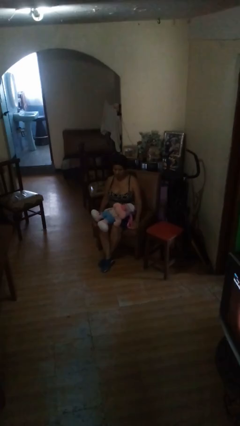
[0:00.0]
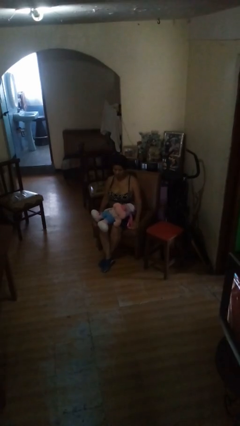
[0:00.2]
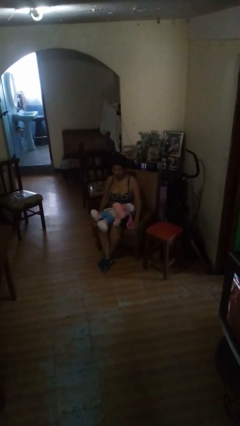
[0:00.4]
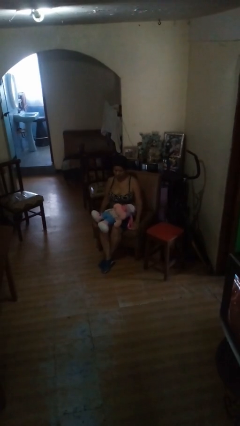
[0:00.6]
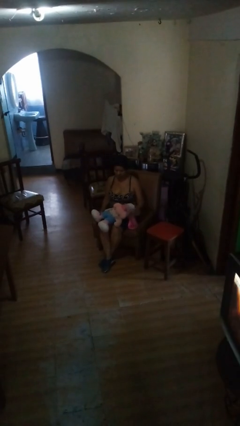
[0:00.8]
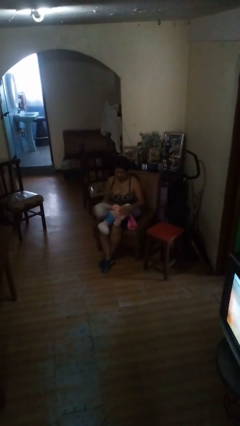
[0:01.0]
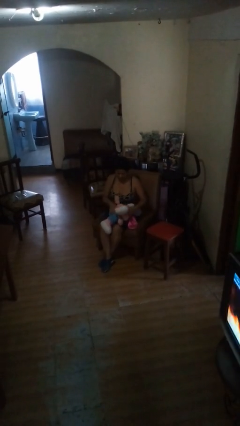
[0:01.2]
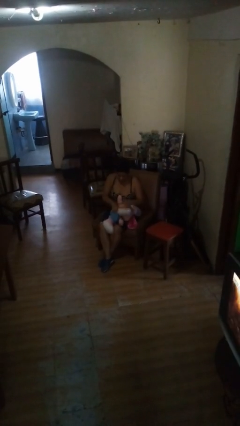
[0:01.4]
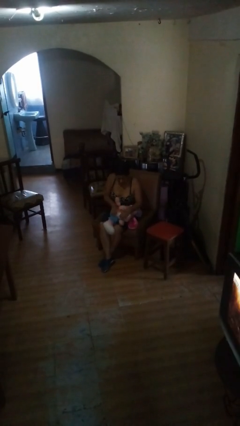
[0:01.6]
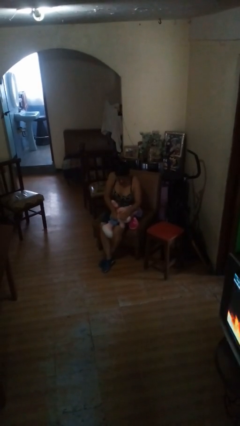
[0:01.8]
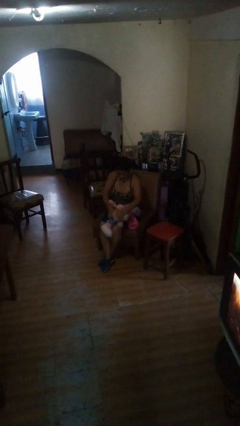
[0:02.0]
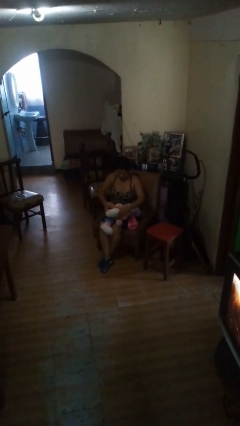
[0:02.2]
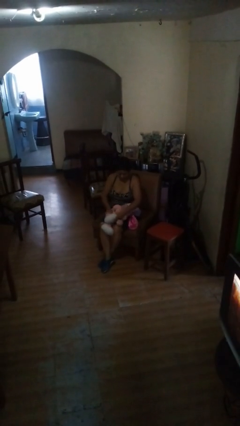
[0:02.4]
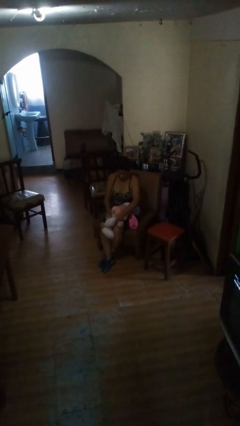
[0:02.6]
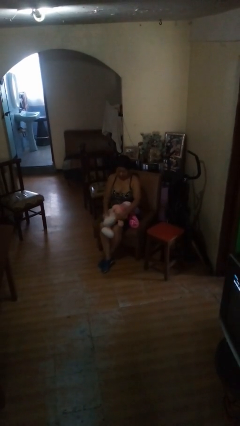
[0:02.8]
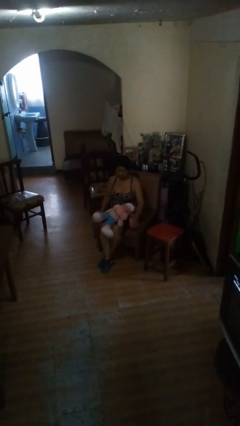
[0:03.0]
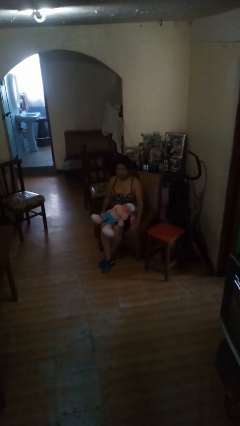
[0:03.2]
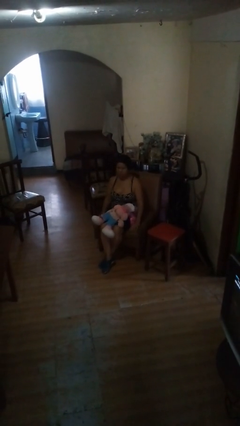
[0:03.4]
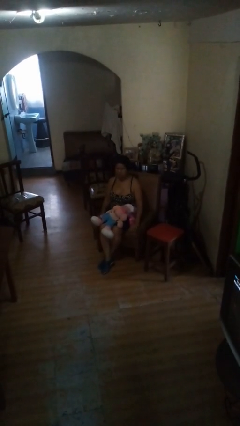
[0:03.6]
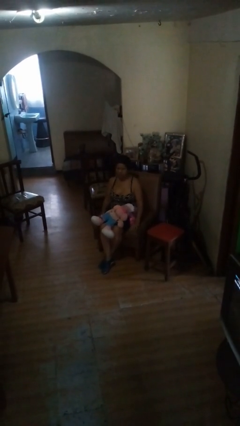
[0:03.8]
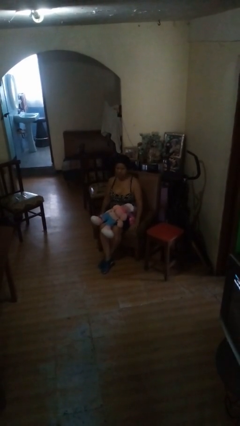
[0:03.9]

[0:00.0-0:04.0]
person squeezes object

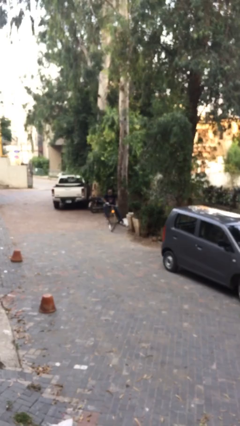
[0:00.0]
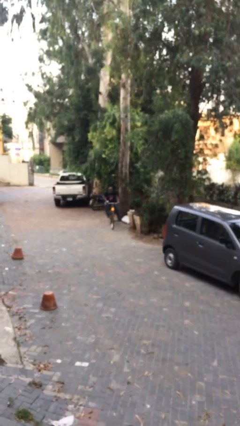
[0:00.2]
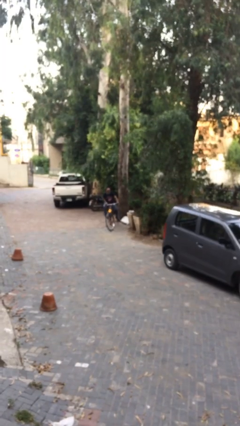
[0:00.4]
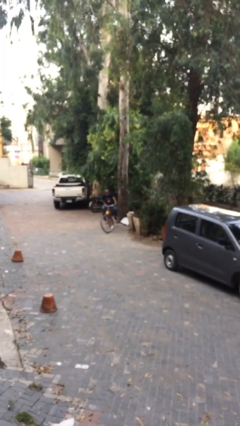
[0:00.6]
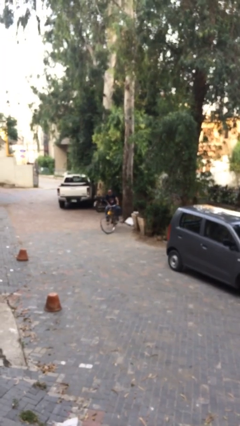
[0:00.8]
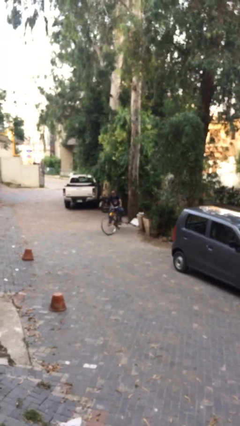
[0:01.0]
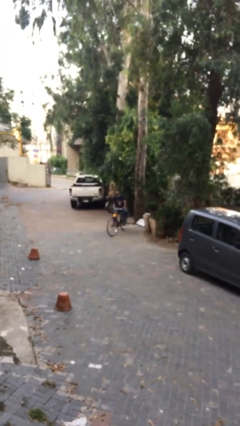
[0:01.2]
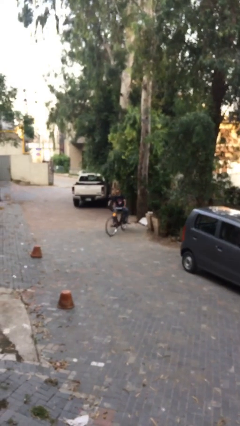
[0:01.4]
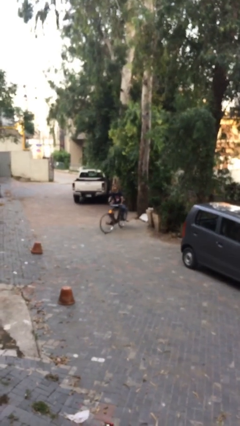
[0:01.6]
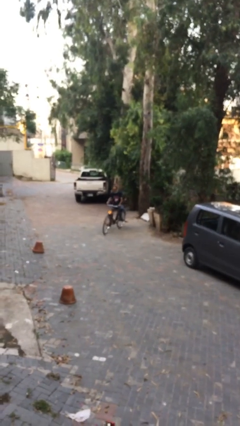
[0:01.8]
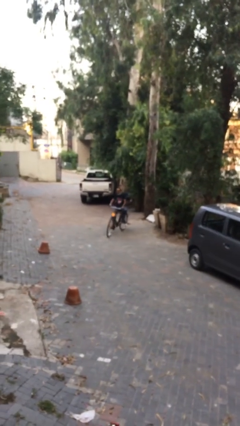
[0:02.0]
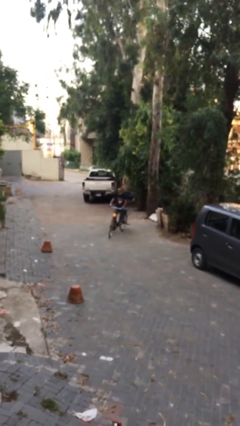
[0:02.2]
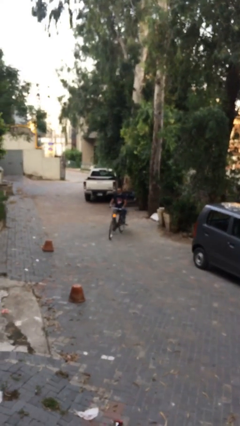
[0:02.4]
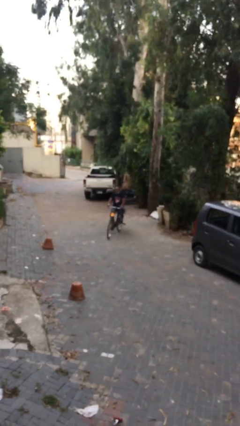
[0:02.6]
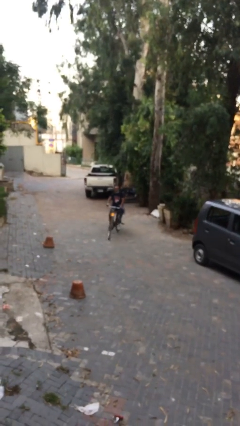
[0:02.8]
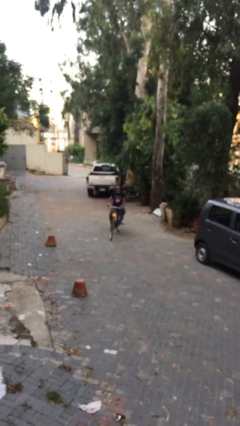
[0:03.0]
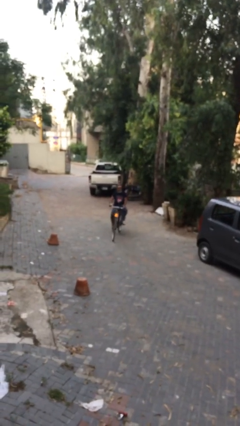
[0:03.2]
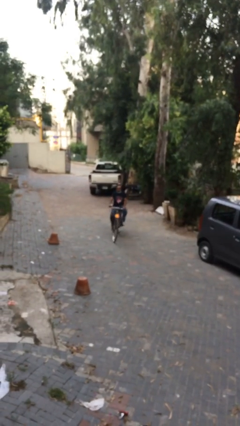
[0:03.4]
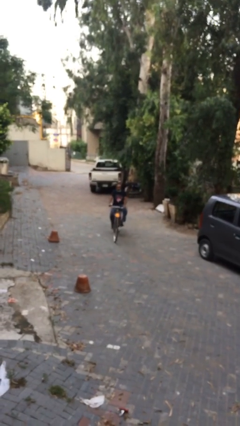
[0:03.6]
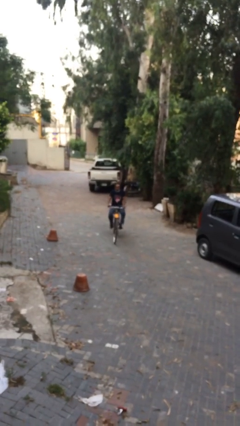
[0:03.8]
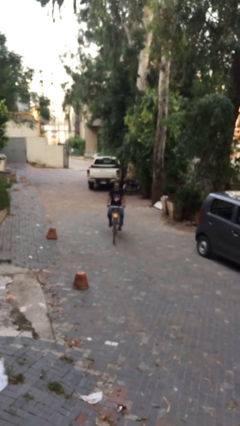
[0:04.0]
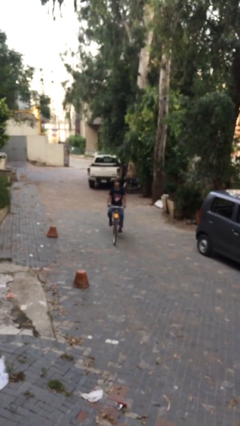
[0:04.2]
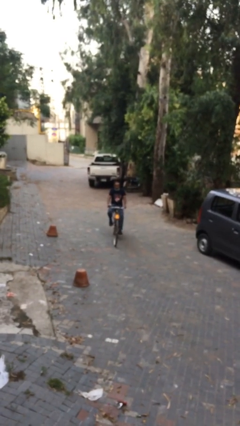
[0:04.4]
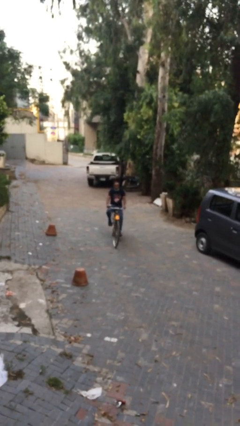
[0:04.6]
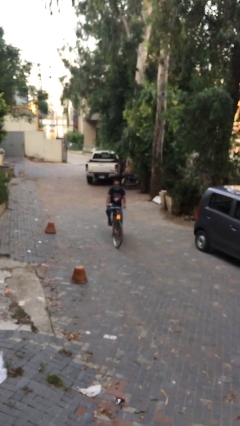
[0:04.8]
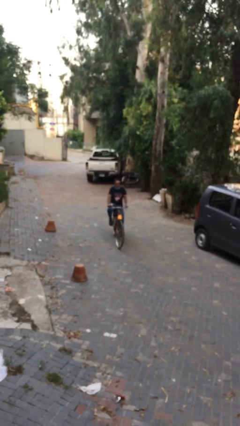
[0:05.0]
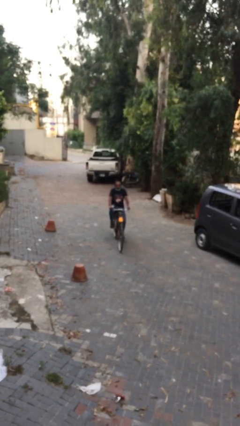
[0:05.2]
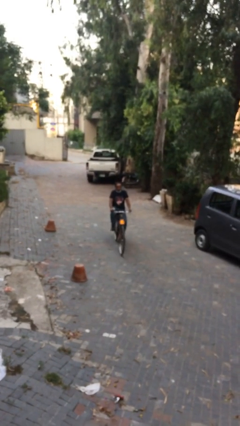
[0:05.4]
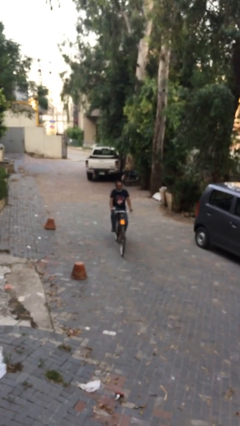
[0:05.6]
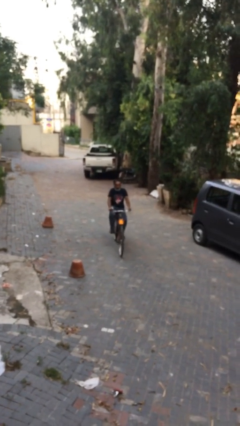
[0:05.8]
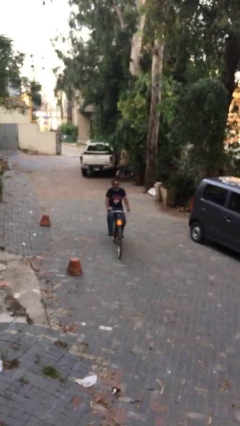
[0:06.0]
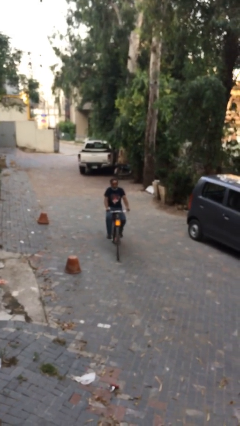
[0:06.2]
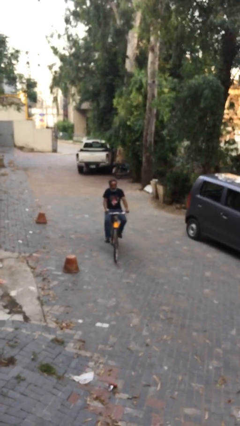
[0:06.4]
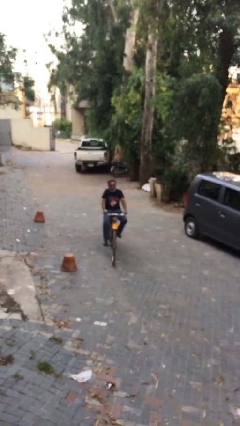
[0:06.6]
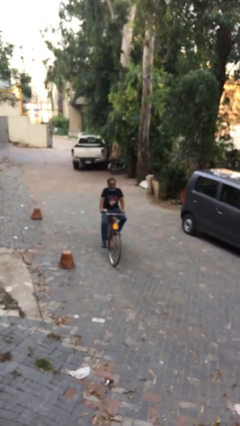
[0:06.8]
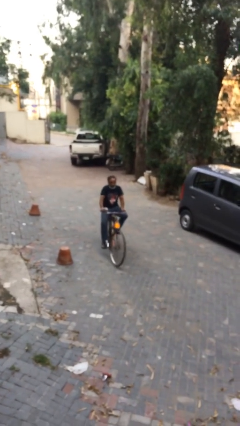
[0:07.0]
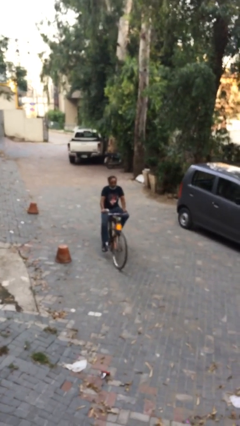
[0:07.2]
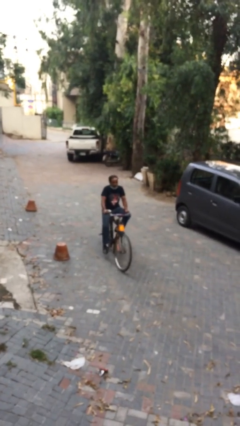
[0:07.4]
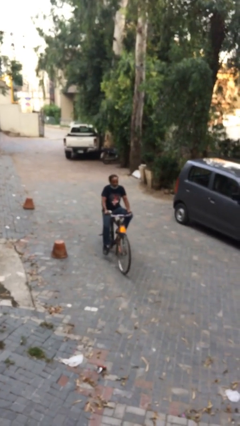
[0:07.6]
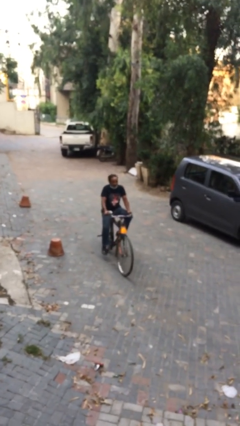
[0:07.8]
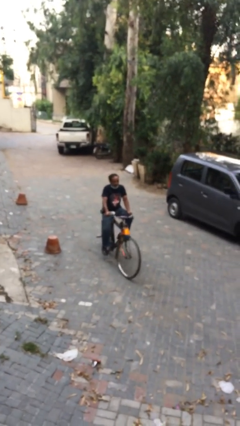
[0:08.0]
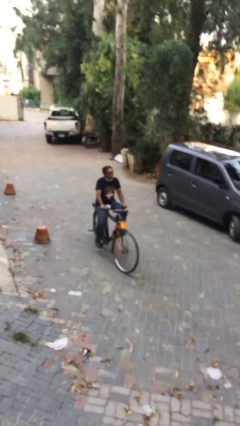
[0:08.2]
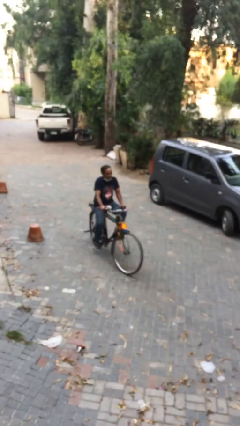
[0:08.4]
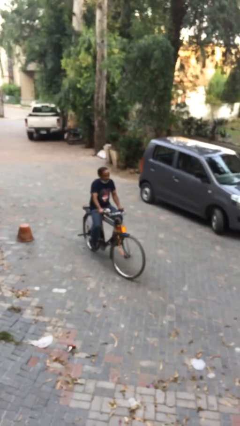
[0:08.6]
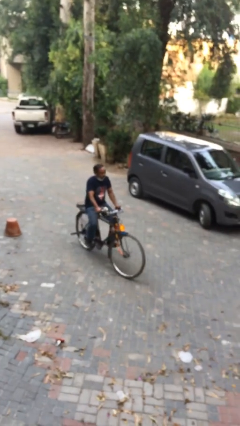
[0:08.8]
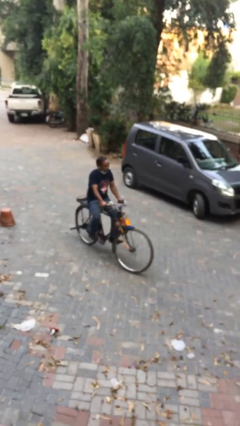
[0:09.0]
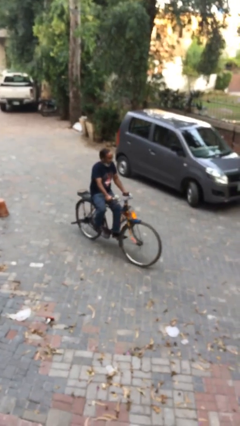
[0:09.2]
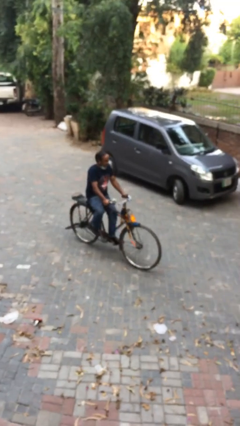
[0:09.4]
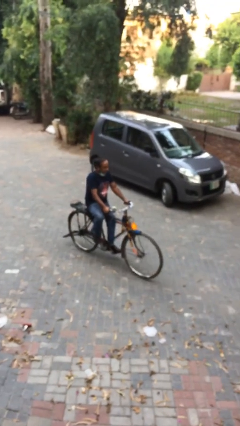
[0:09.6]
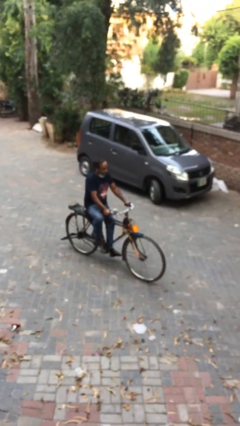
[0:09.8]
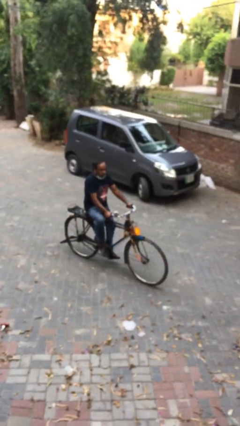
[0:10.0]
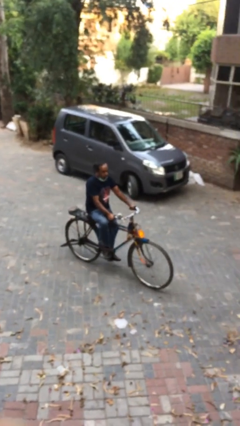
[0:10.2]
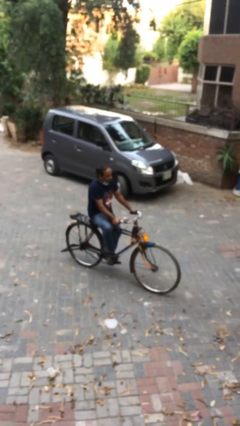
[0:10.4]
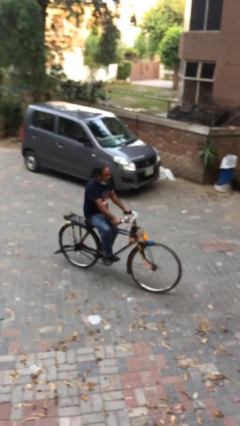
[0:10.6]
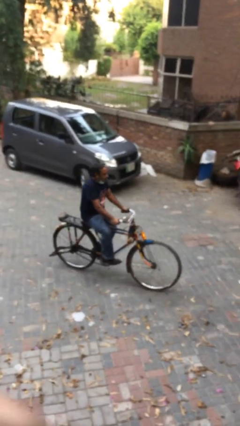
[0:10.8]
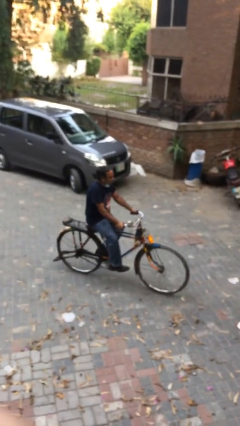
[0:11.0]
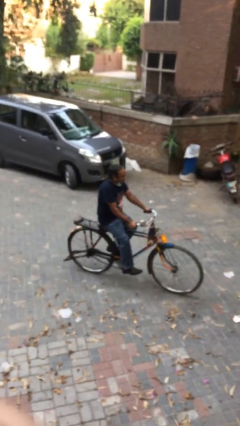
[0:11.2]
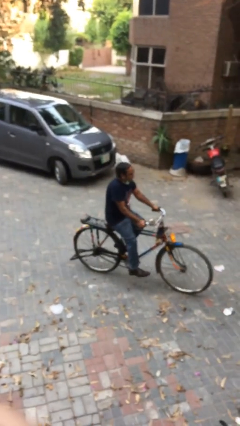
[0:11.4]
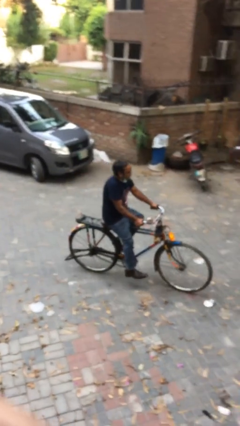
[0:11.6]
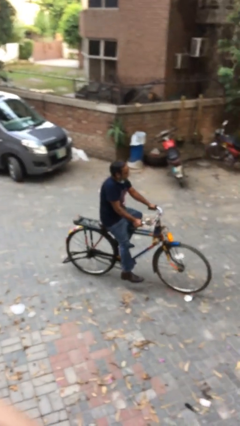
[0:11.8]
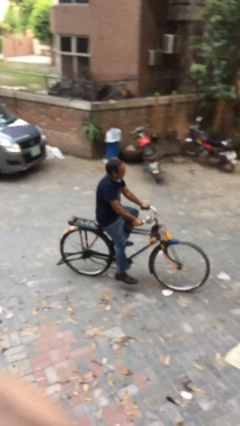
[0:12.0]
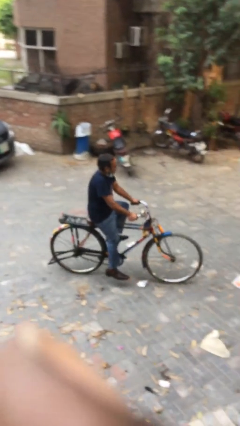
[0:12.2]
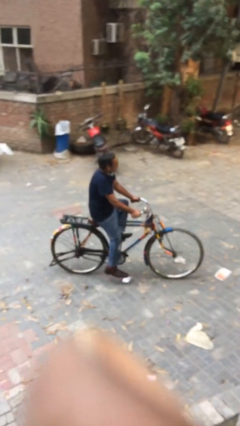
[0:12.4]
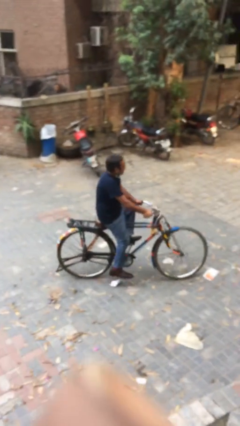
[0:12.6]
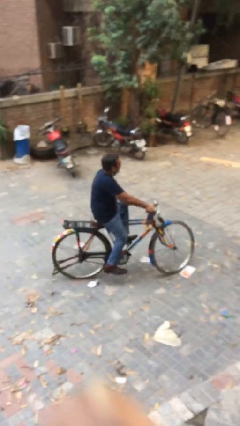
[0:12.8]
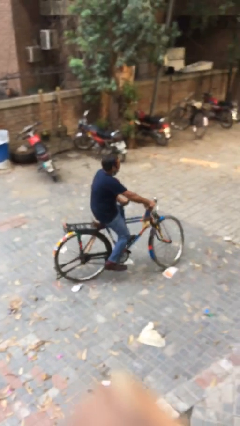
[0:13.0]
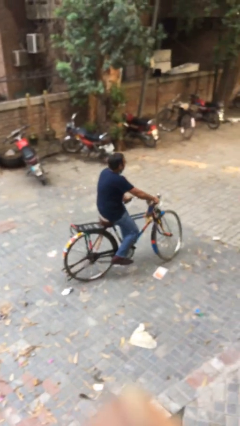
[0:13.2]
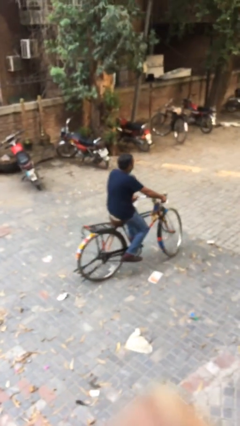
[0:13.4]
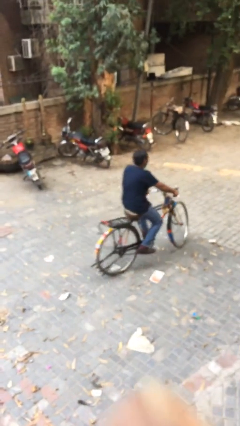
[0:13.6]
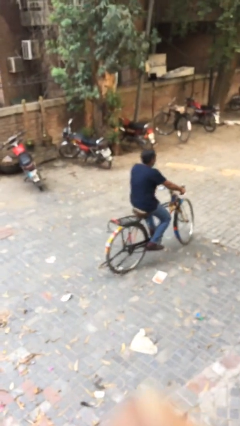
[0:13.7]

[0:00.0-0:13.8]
person rides bicycle
